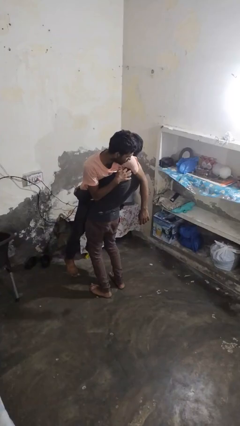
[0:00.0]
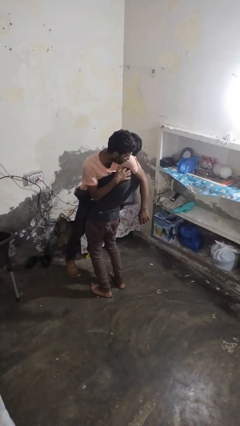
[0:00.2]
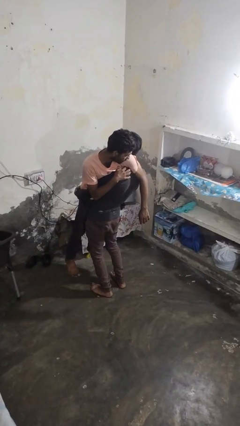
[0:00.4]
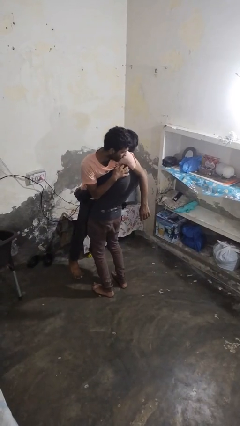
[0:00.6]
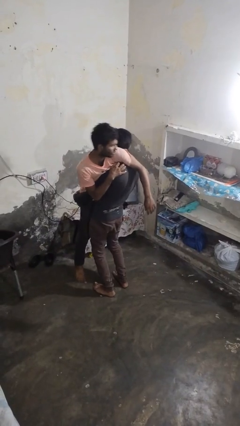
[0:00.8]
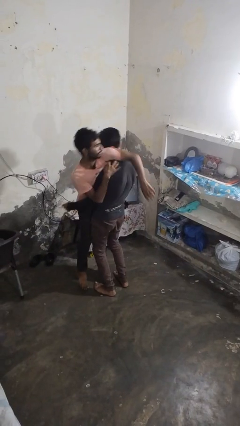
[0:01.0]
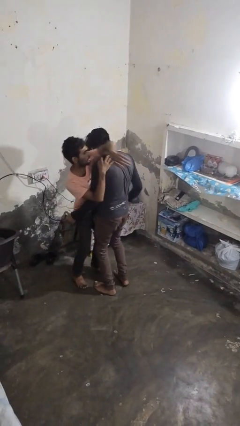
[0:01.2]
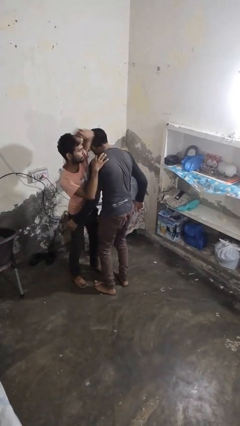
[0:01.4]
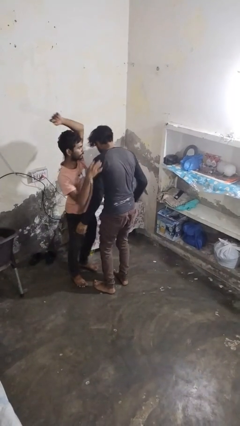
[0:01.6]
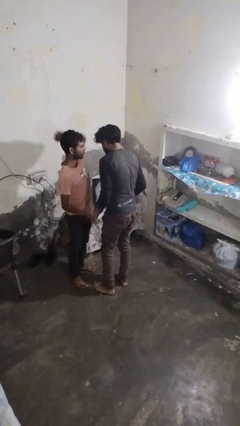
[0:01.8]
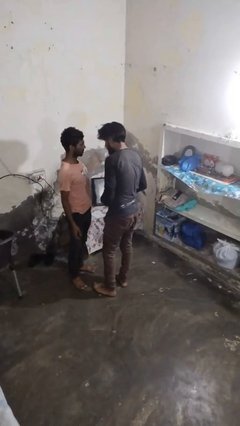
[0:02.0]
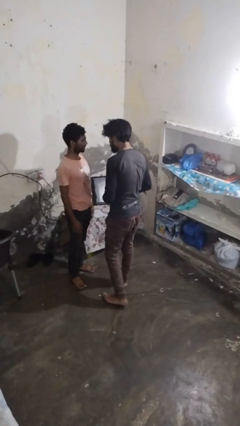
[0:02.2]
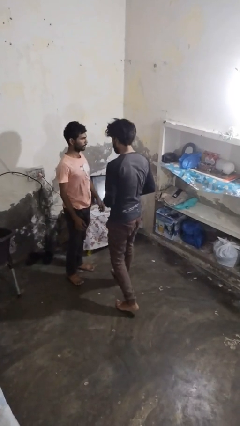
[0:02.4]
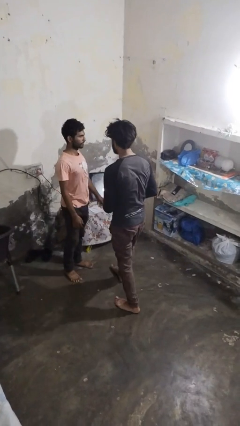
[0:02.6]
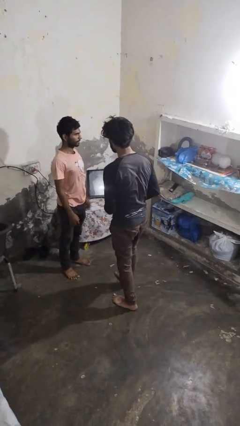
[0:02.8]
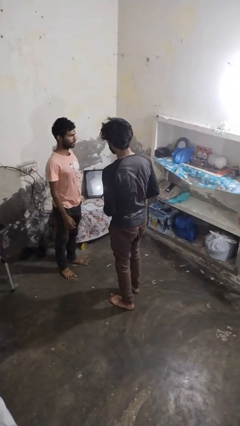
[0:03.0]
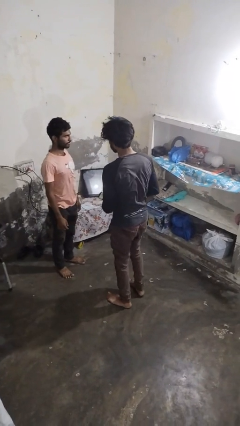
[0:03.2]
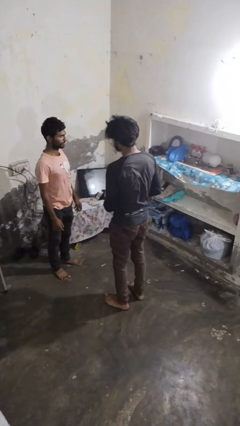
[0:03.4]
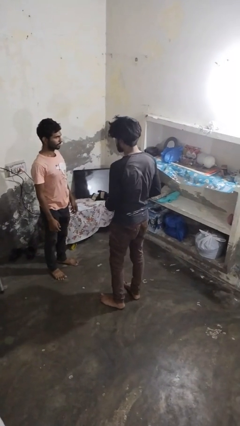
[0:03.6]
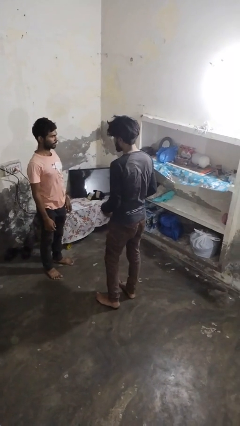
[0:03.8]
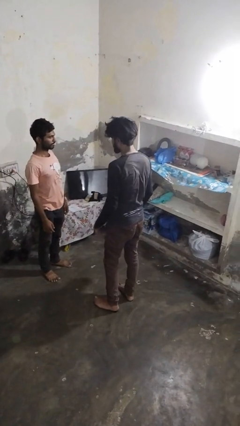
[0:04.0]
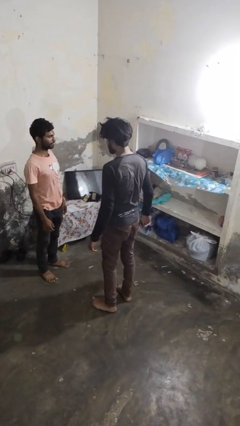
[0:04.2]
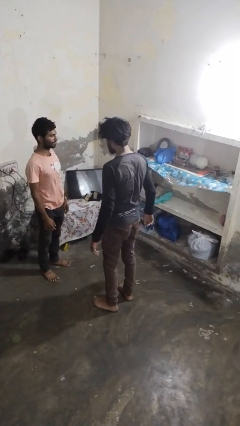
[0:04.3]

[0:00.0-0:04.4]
person puts down person

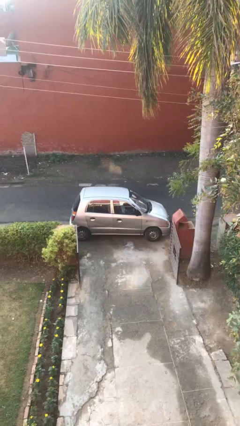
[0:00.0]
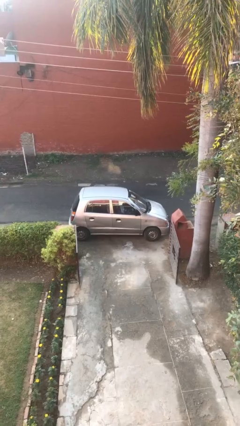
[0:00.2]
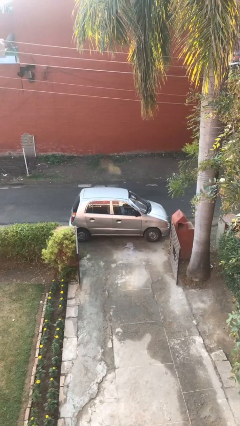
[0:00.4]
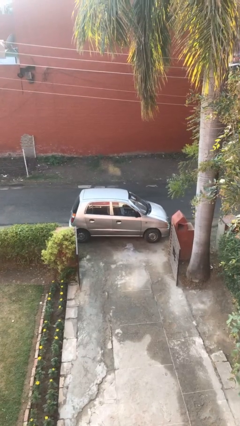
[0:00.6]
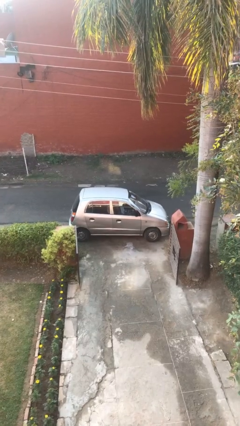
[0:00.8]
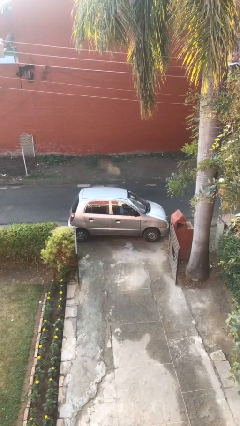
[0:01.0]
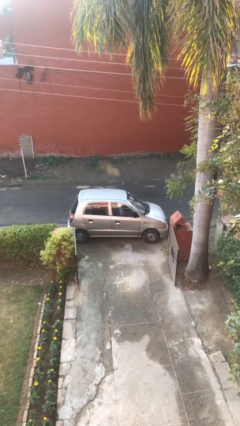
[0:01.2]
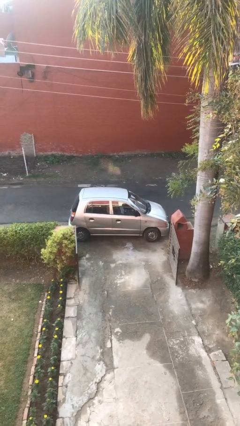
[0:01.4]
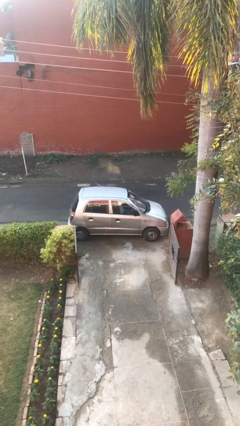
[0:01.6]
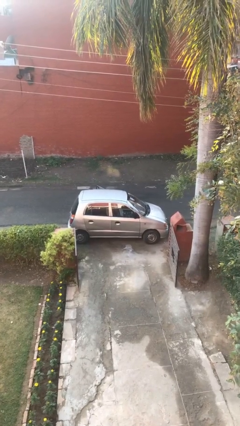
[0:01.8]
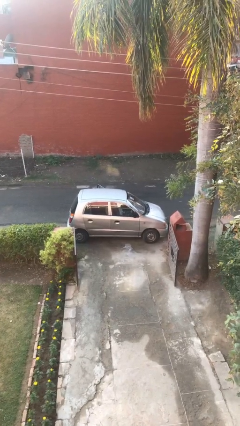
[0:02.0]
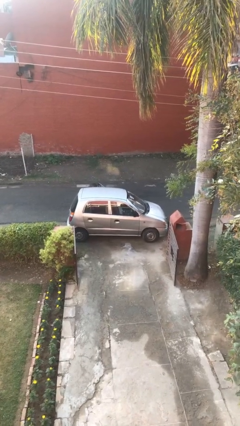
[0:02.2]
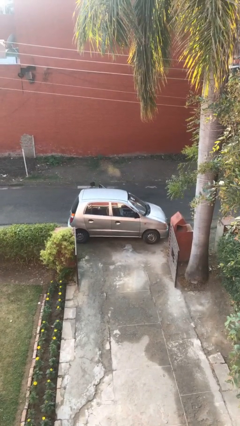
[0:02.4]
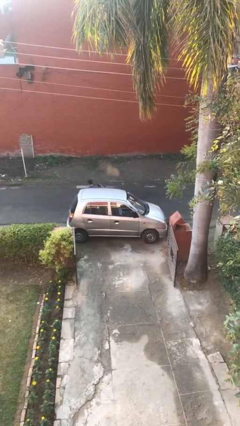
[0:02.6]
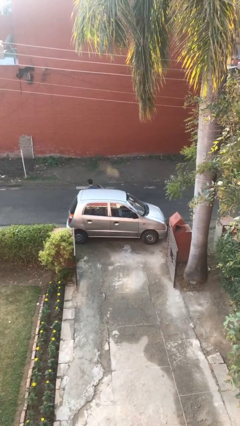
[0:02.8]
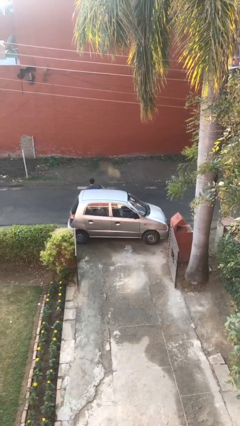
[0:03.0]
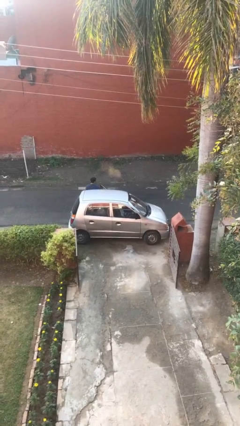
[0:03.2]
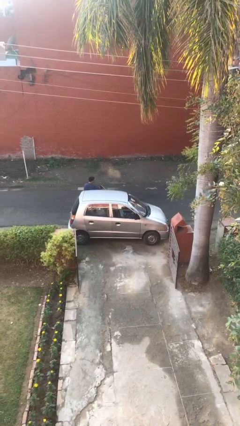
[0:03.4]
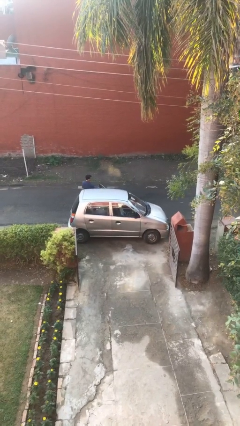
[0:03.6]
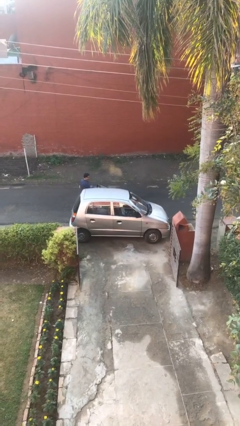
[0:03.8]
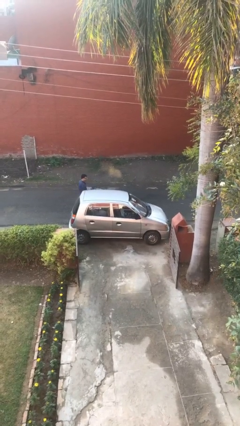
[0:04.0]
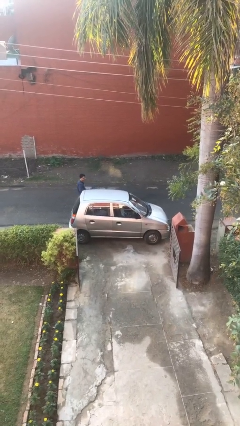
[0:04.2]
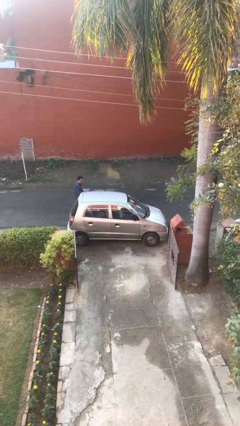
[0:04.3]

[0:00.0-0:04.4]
car drops off person

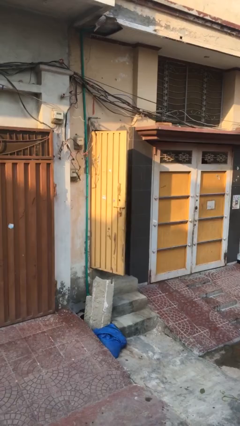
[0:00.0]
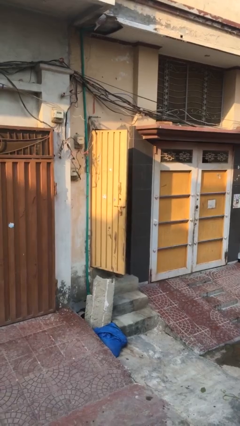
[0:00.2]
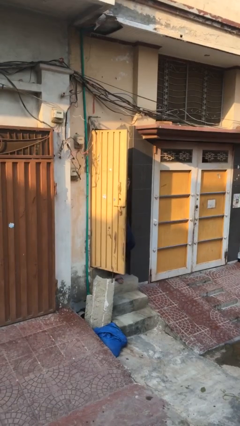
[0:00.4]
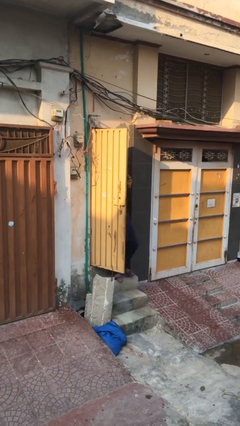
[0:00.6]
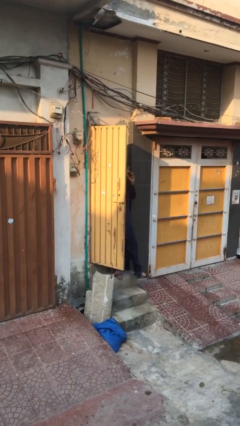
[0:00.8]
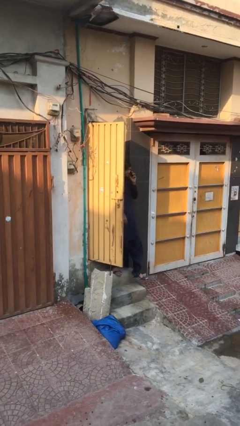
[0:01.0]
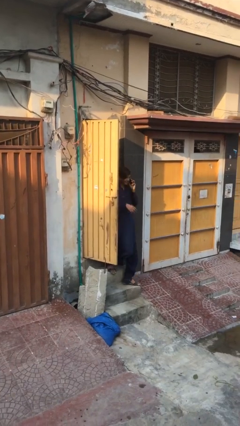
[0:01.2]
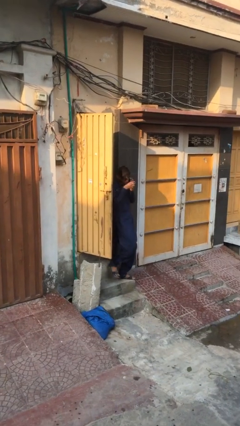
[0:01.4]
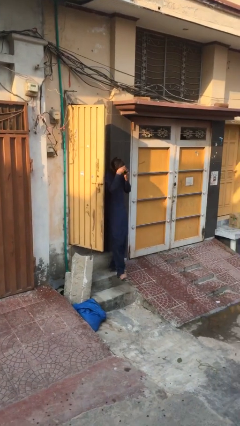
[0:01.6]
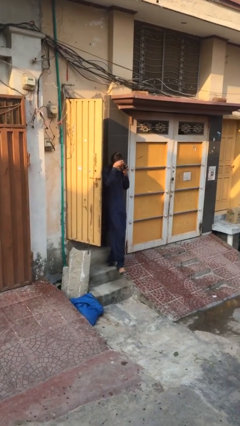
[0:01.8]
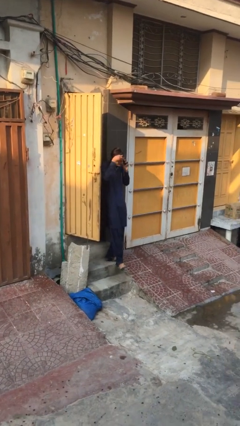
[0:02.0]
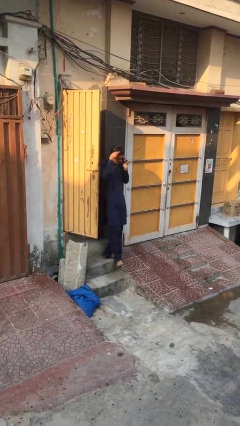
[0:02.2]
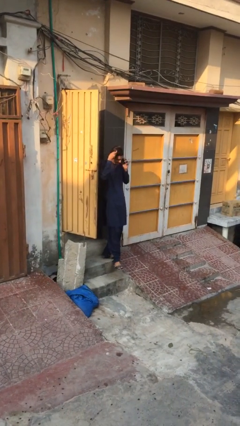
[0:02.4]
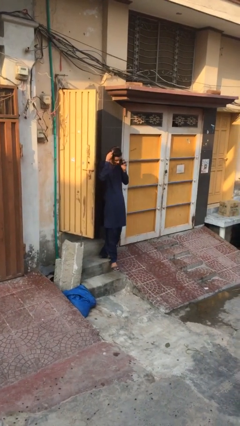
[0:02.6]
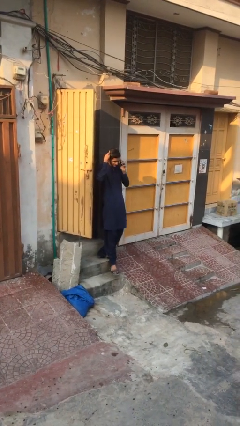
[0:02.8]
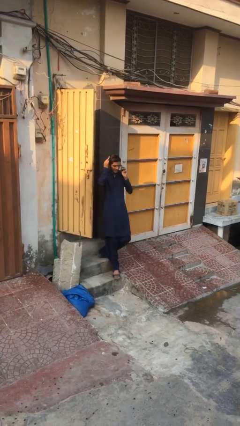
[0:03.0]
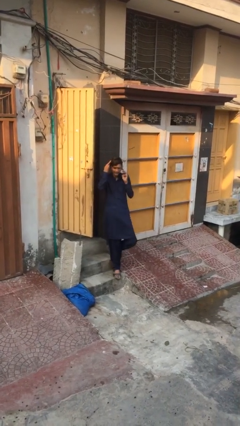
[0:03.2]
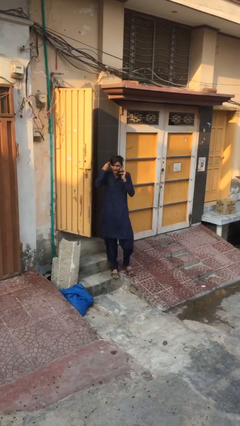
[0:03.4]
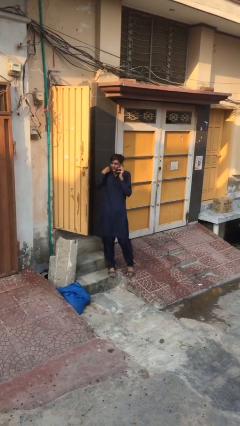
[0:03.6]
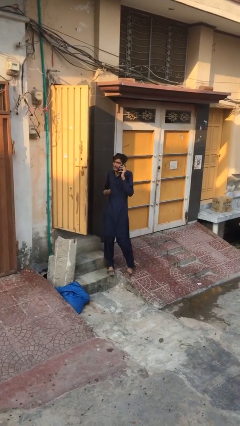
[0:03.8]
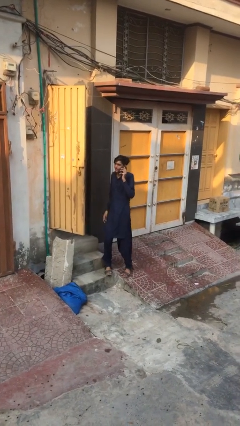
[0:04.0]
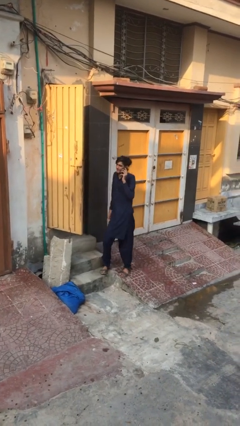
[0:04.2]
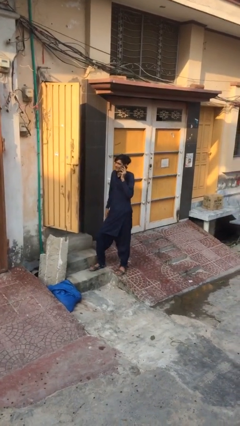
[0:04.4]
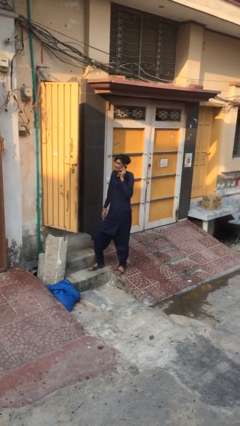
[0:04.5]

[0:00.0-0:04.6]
person enters scene through structure

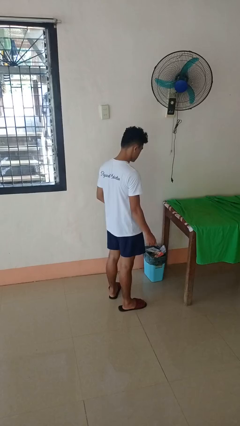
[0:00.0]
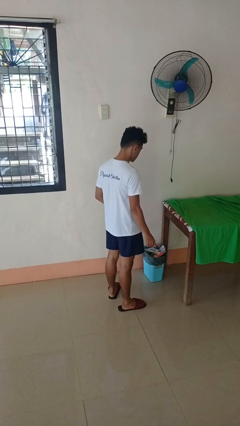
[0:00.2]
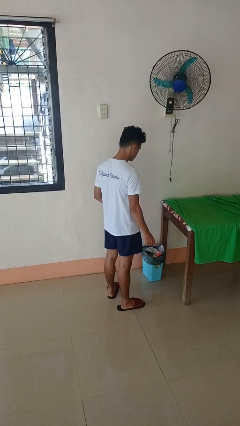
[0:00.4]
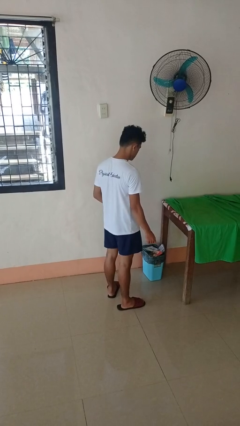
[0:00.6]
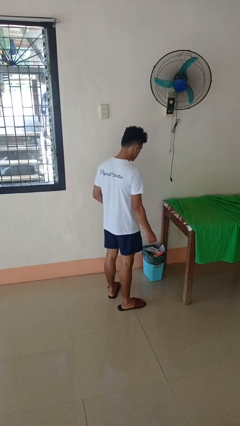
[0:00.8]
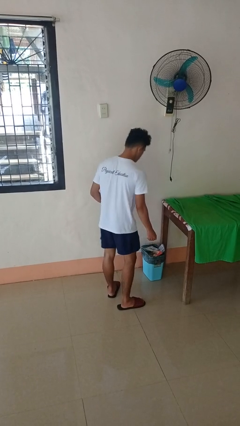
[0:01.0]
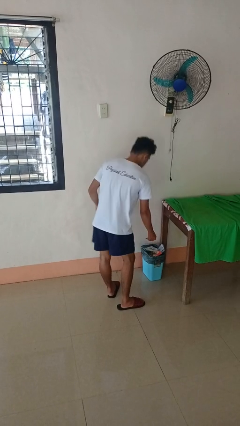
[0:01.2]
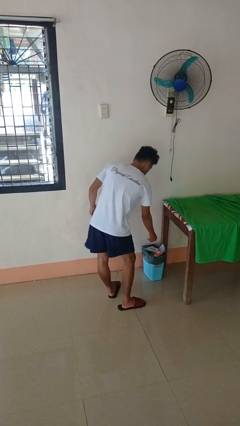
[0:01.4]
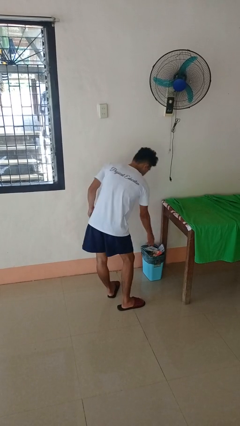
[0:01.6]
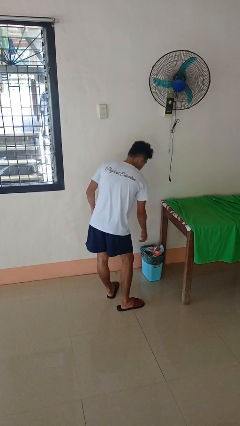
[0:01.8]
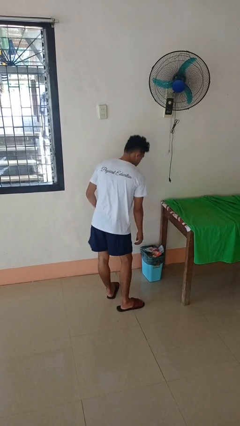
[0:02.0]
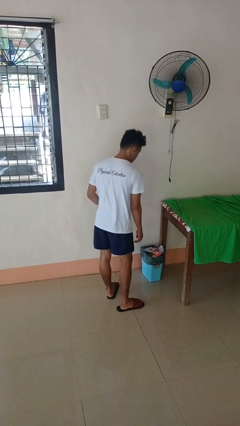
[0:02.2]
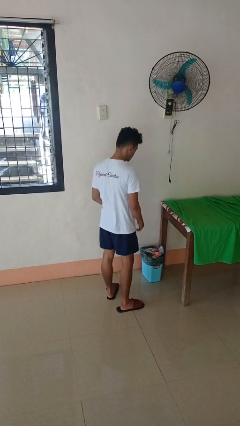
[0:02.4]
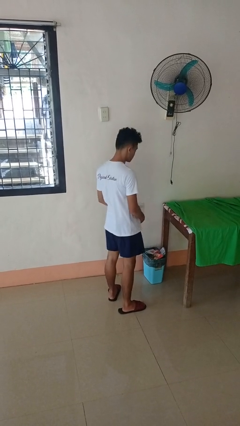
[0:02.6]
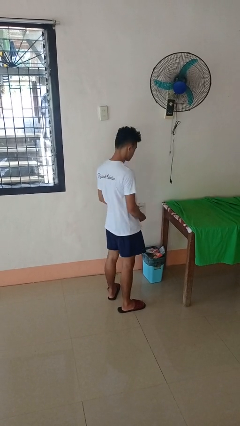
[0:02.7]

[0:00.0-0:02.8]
person discards trash

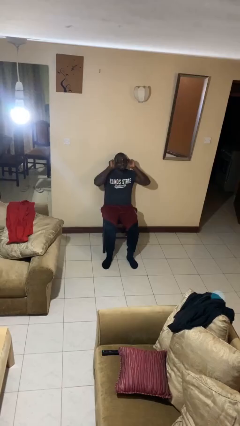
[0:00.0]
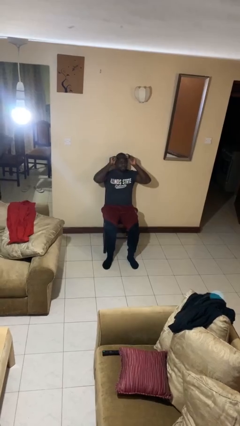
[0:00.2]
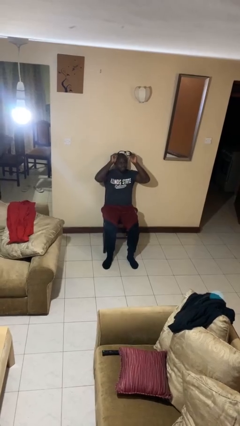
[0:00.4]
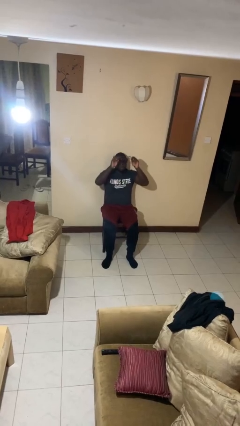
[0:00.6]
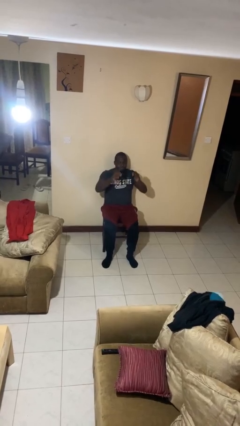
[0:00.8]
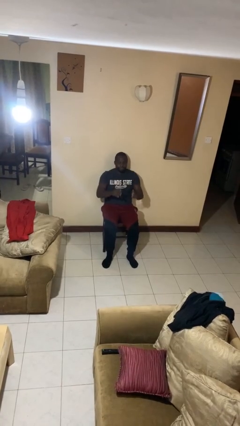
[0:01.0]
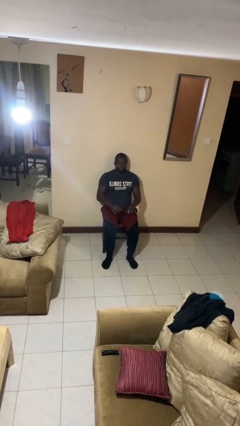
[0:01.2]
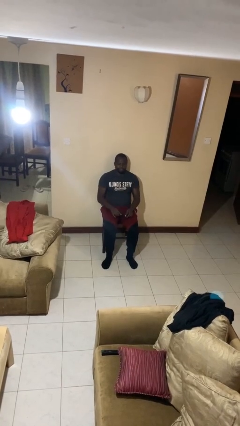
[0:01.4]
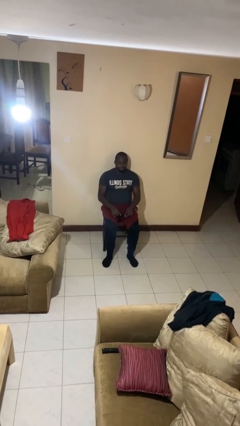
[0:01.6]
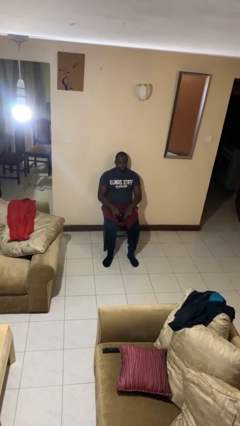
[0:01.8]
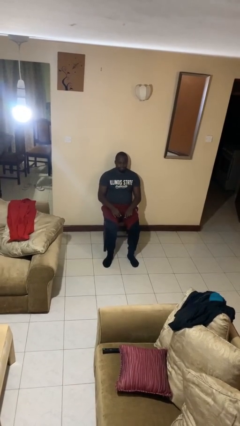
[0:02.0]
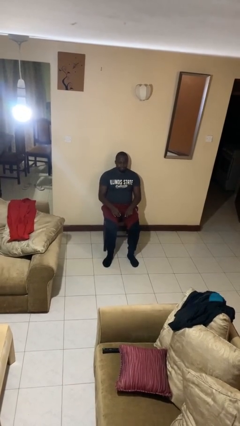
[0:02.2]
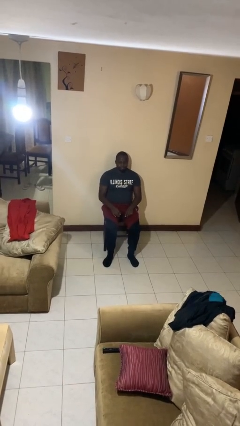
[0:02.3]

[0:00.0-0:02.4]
person takes off glasses
